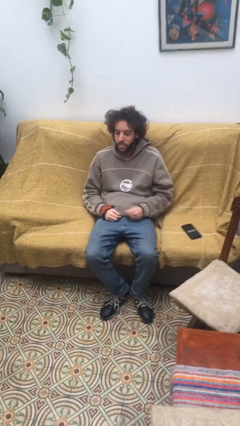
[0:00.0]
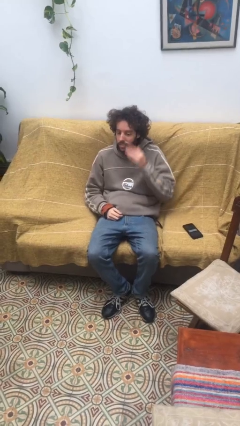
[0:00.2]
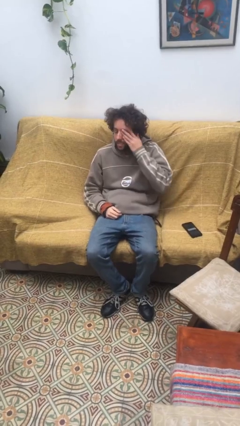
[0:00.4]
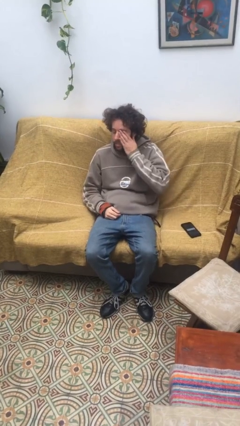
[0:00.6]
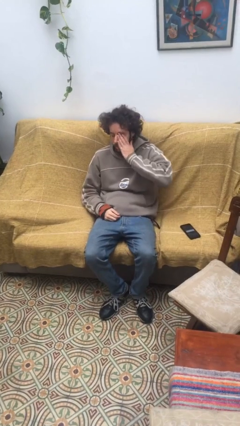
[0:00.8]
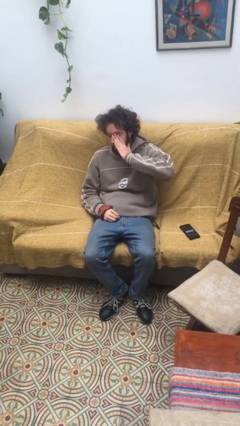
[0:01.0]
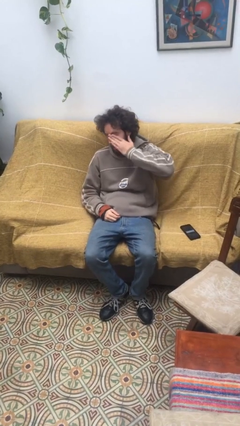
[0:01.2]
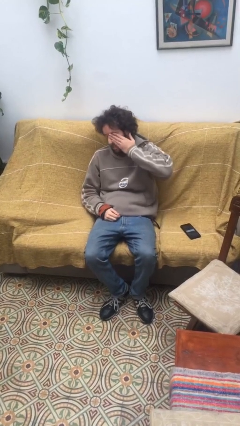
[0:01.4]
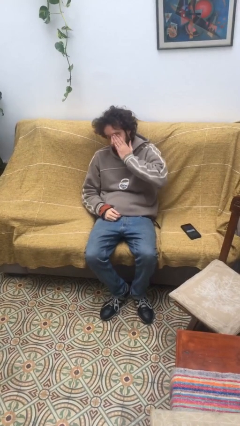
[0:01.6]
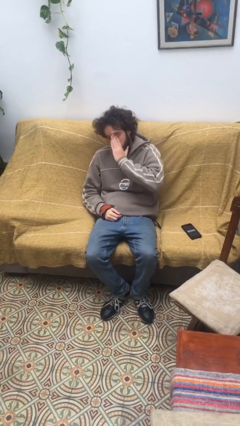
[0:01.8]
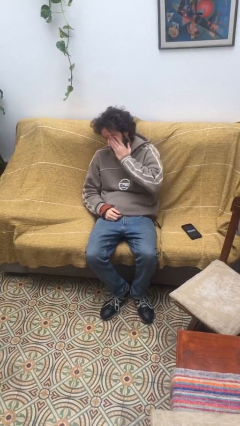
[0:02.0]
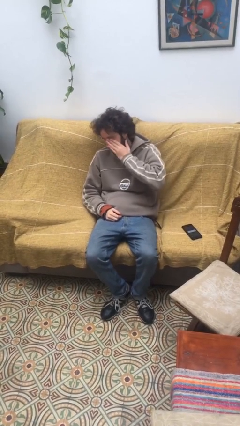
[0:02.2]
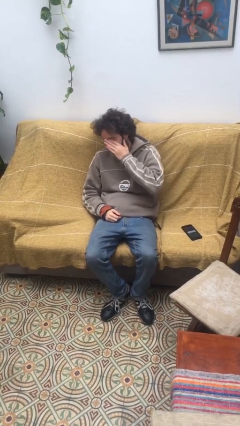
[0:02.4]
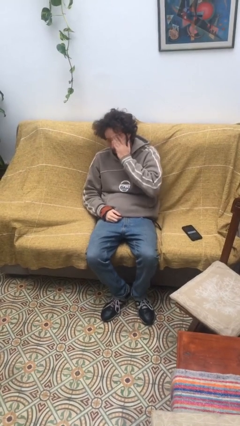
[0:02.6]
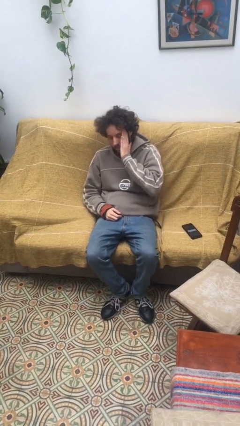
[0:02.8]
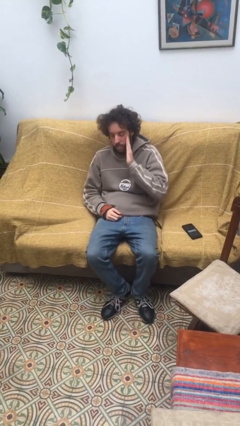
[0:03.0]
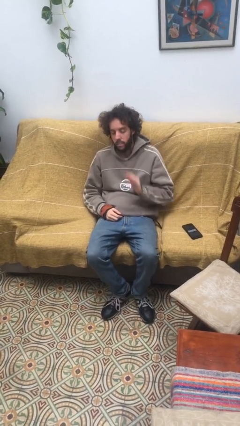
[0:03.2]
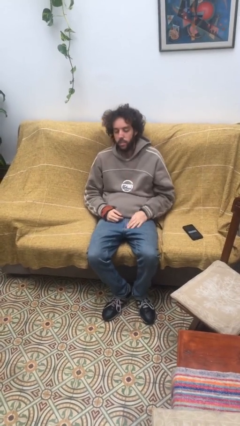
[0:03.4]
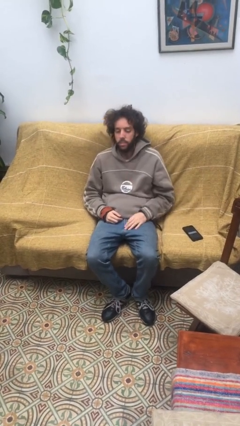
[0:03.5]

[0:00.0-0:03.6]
person rubs eyes

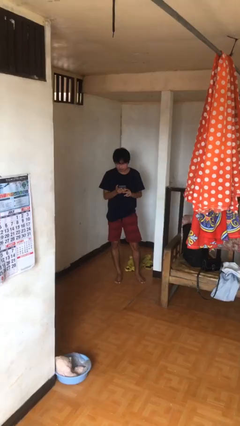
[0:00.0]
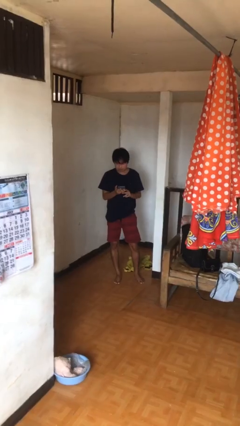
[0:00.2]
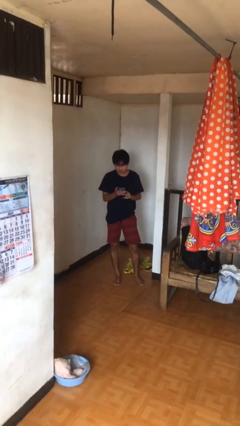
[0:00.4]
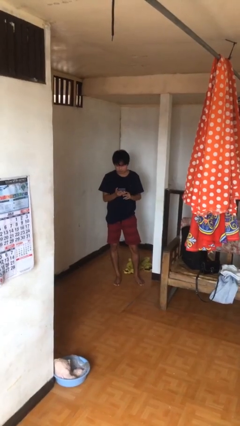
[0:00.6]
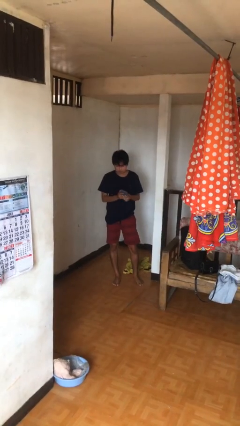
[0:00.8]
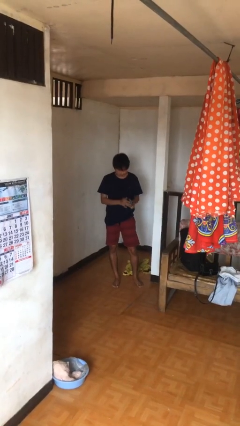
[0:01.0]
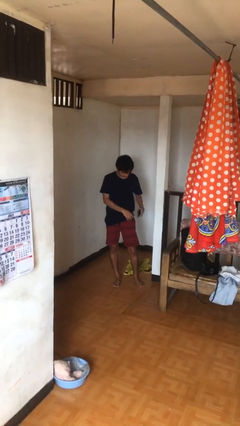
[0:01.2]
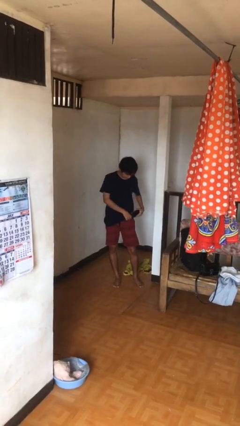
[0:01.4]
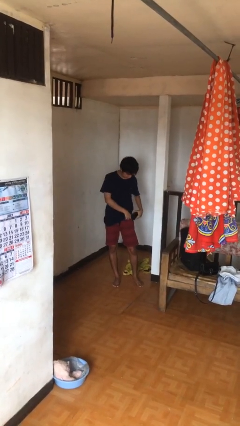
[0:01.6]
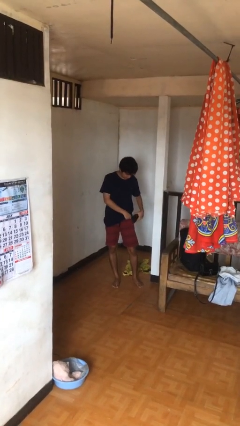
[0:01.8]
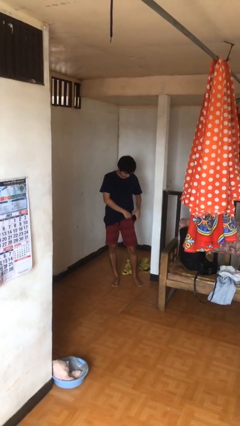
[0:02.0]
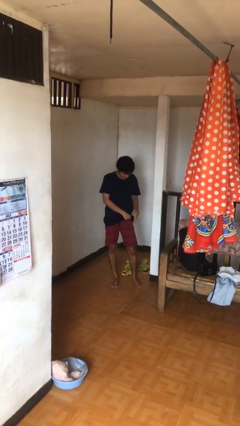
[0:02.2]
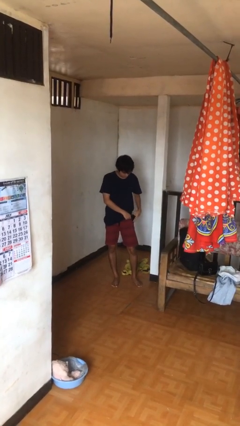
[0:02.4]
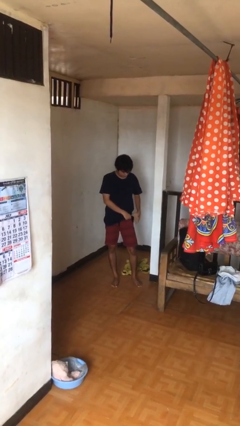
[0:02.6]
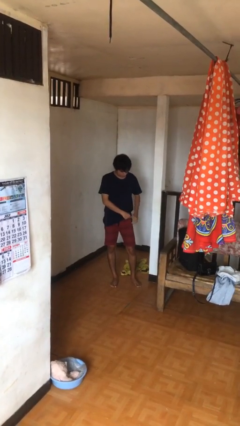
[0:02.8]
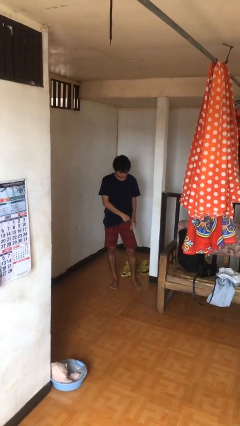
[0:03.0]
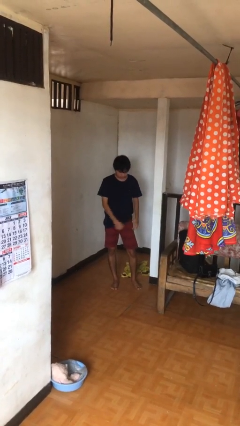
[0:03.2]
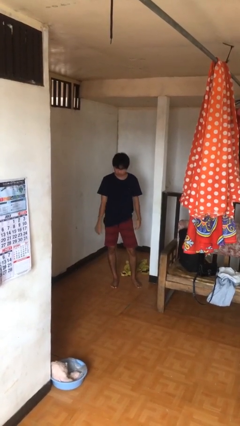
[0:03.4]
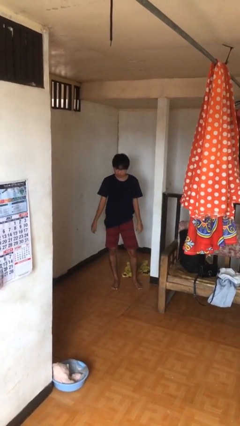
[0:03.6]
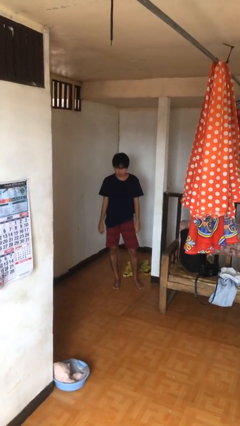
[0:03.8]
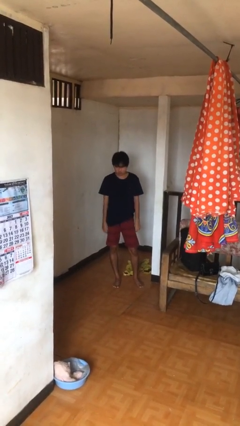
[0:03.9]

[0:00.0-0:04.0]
person puts phone into pocket

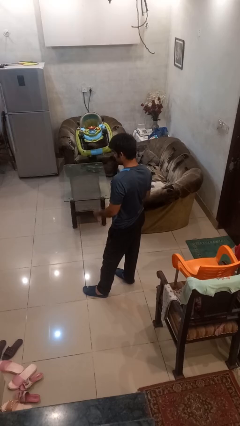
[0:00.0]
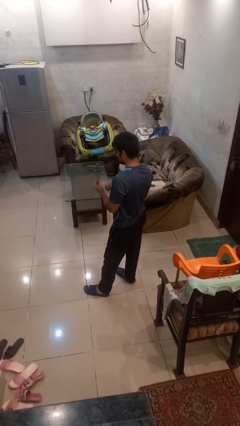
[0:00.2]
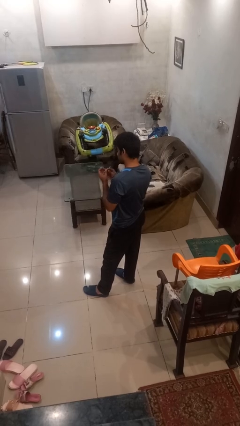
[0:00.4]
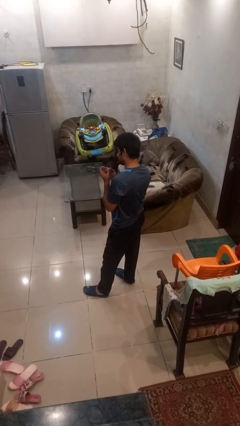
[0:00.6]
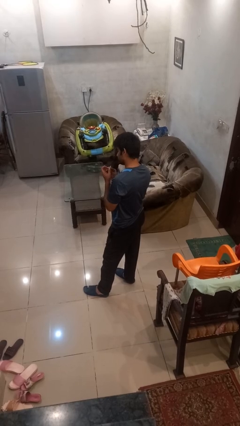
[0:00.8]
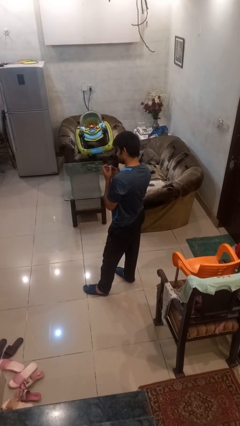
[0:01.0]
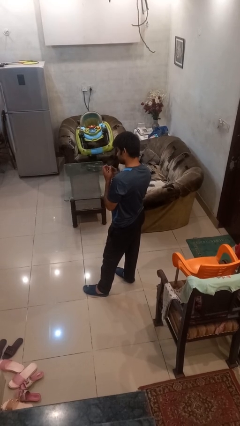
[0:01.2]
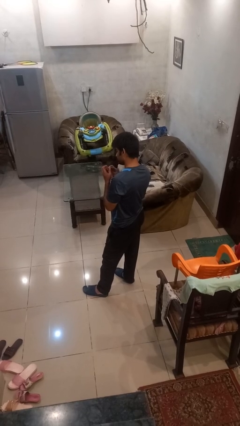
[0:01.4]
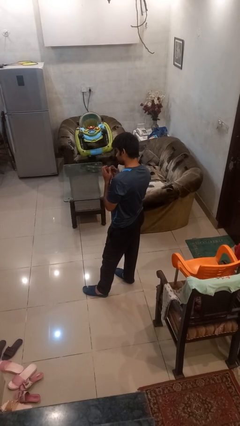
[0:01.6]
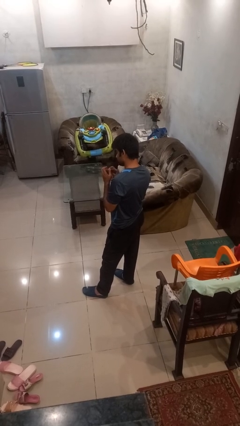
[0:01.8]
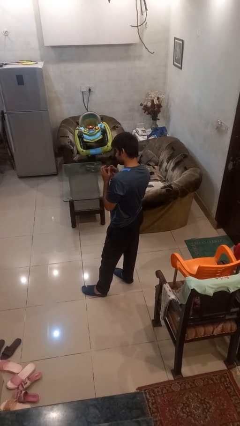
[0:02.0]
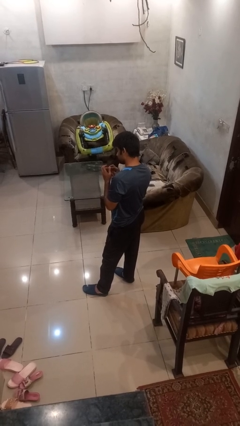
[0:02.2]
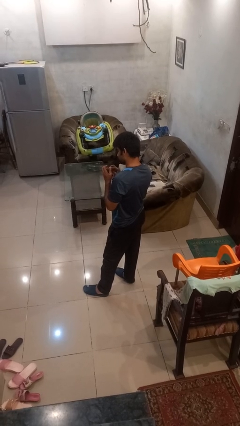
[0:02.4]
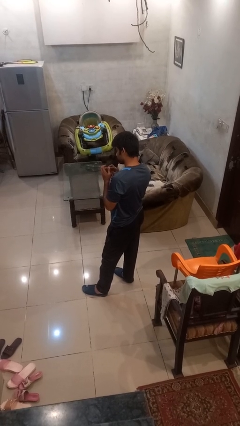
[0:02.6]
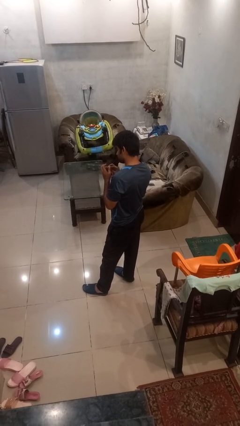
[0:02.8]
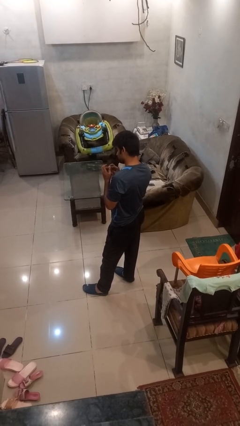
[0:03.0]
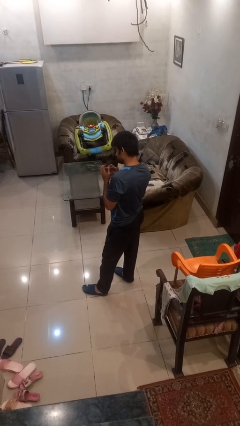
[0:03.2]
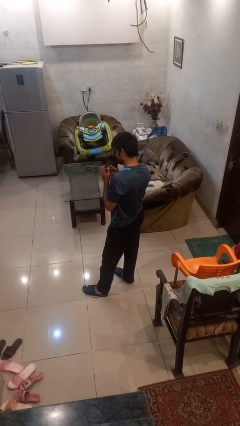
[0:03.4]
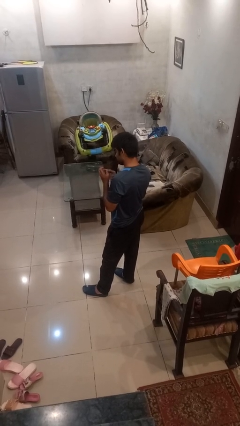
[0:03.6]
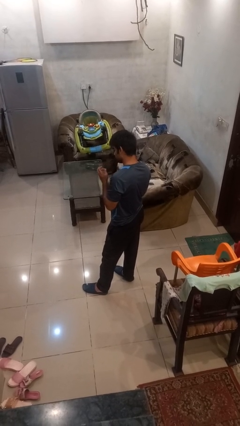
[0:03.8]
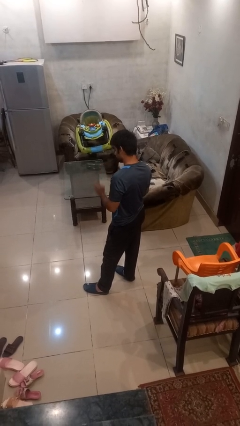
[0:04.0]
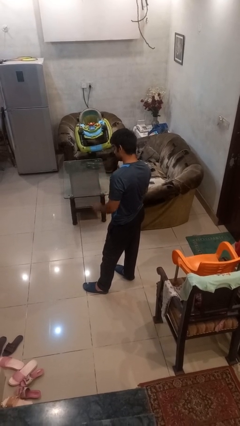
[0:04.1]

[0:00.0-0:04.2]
person files fingernails

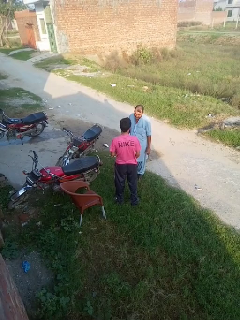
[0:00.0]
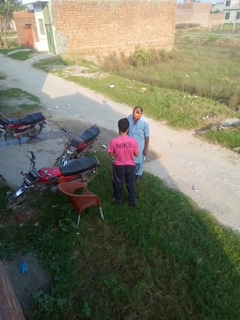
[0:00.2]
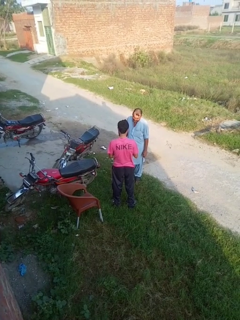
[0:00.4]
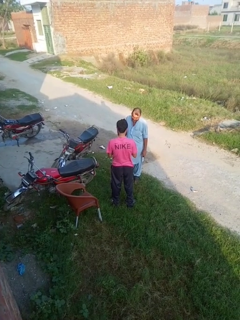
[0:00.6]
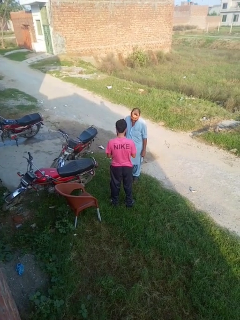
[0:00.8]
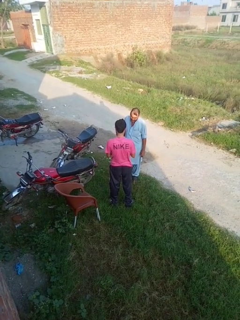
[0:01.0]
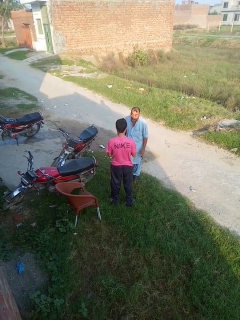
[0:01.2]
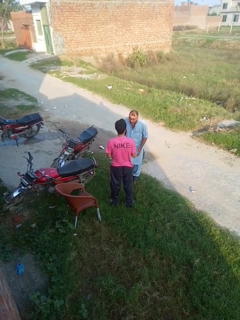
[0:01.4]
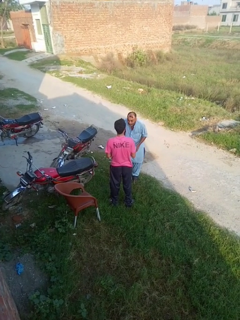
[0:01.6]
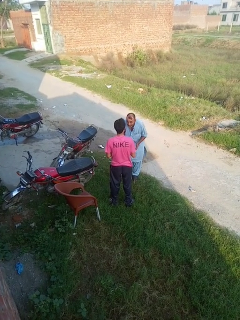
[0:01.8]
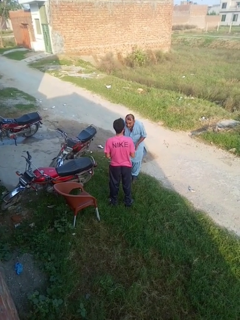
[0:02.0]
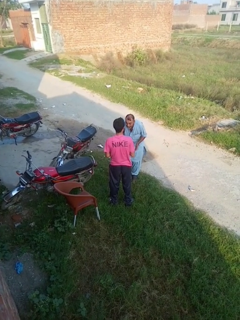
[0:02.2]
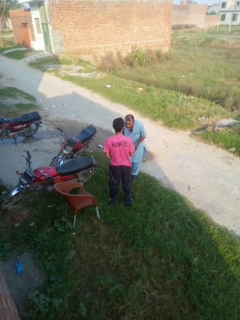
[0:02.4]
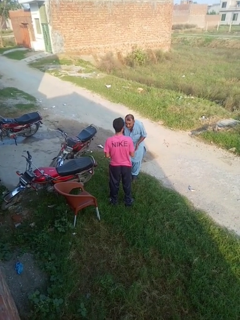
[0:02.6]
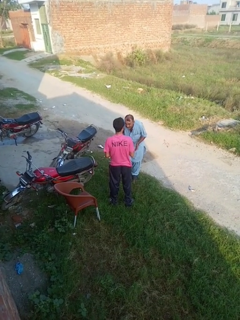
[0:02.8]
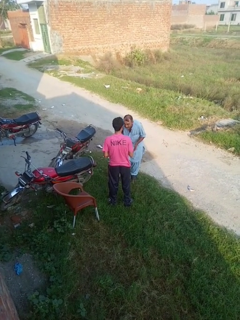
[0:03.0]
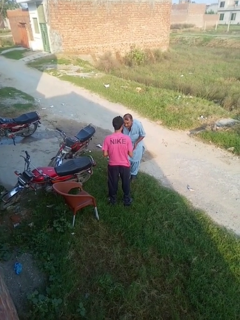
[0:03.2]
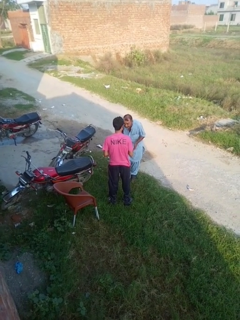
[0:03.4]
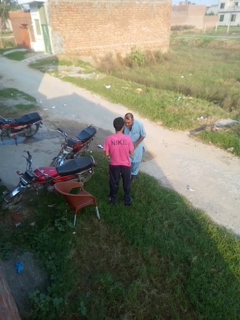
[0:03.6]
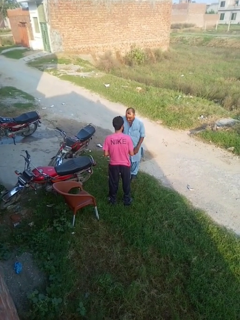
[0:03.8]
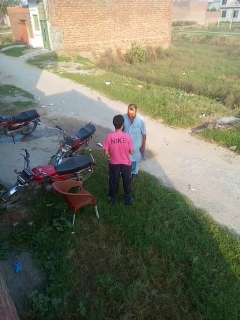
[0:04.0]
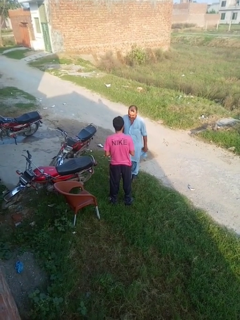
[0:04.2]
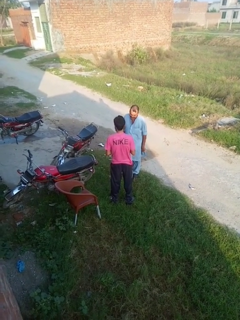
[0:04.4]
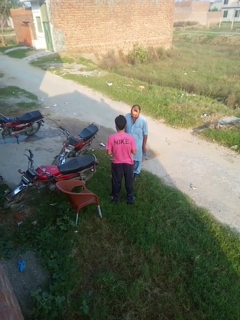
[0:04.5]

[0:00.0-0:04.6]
person laughs with person

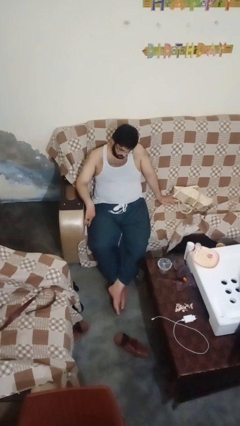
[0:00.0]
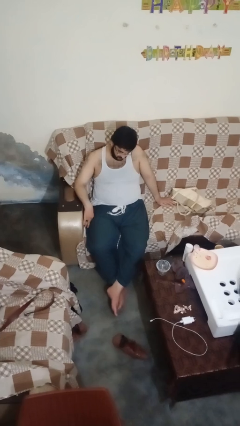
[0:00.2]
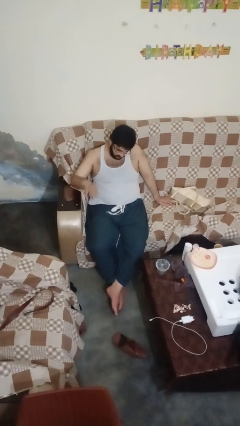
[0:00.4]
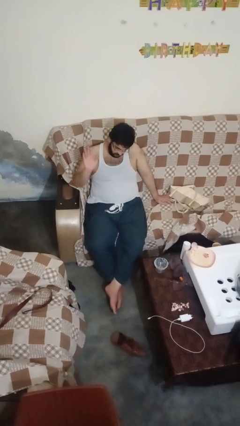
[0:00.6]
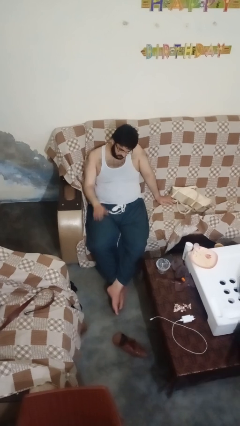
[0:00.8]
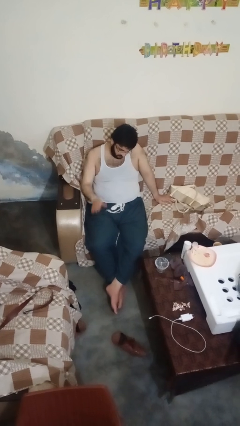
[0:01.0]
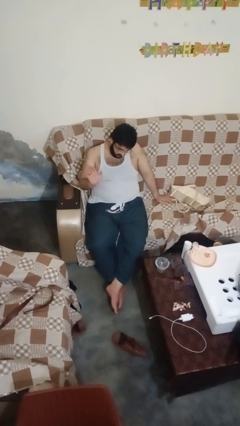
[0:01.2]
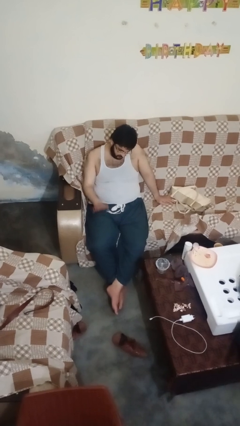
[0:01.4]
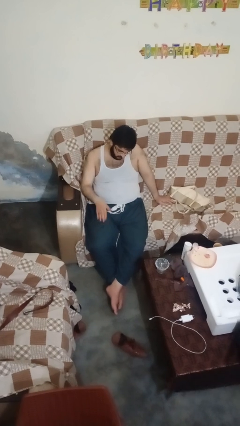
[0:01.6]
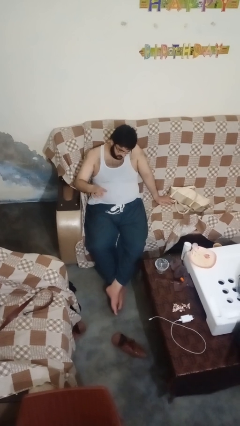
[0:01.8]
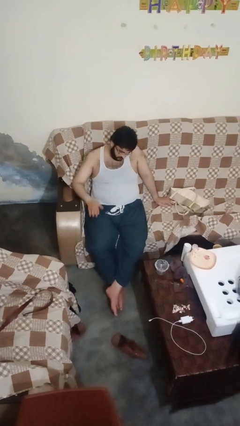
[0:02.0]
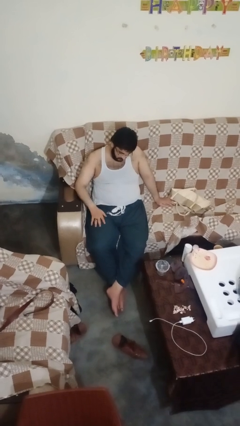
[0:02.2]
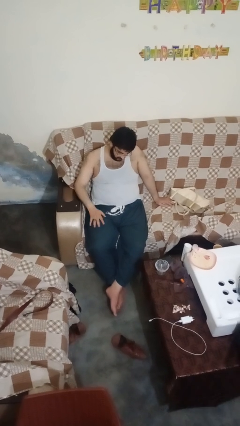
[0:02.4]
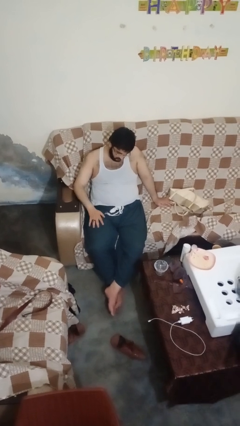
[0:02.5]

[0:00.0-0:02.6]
person slaps hands on thighs
